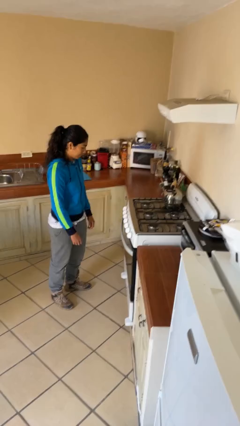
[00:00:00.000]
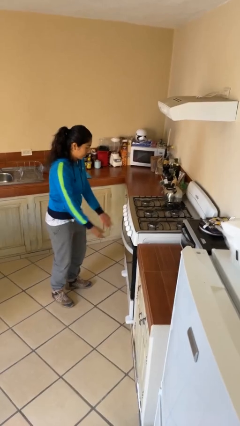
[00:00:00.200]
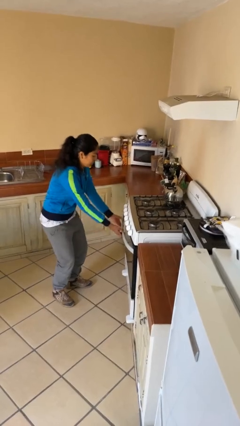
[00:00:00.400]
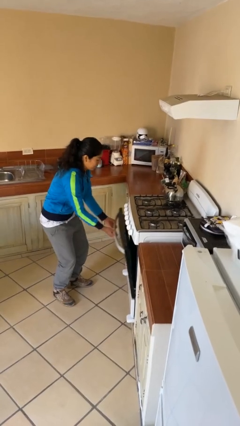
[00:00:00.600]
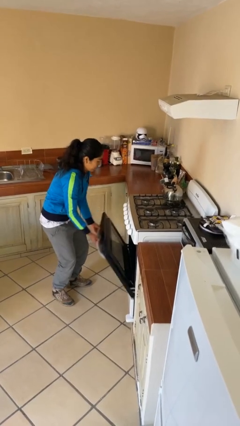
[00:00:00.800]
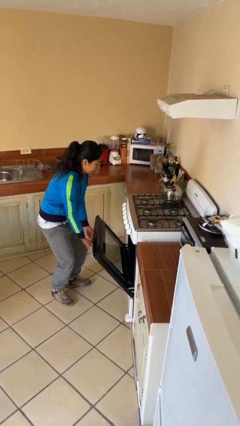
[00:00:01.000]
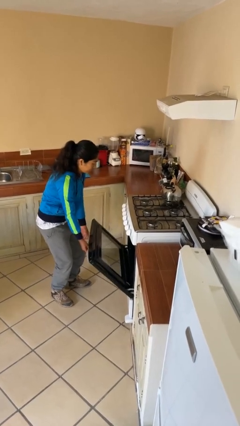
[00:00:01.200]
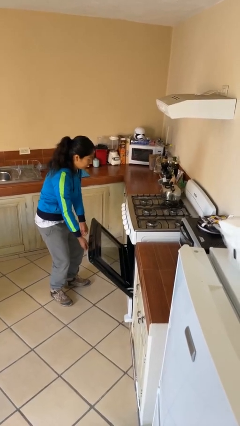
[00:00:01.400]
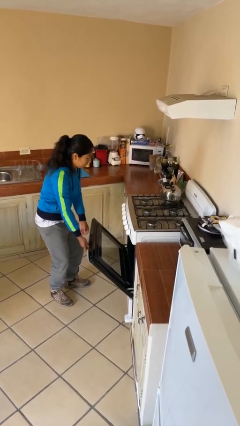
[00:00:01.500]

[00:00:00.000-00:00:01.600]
person opens oven door

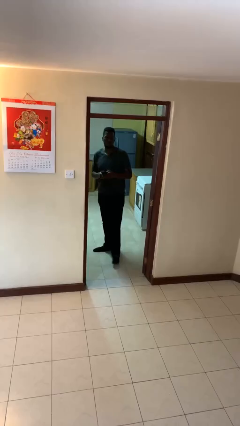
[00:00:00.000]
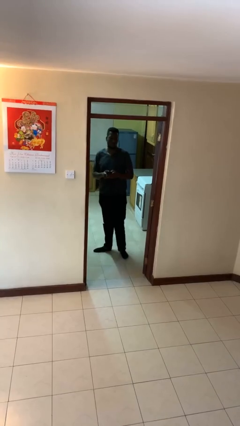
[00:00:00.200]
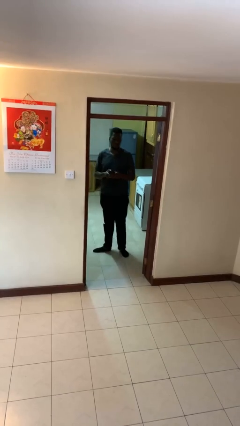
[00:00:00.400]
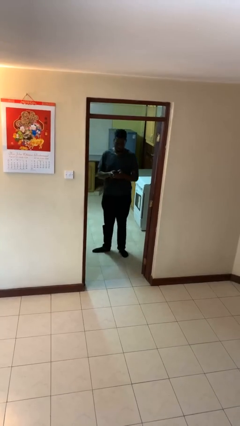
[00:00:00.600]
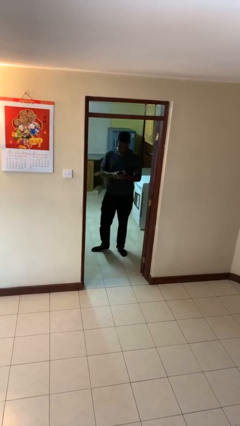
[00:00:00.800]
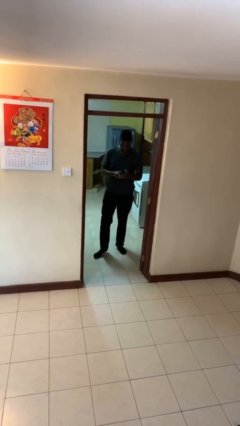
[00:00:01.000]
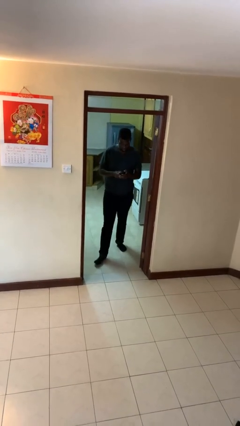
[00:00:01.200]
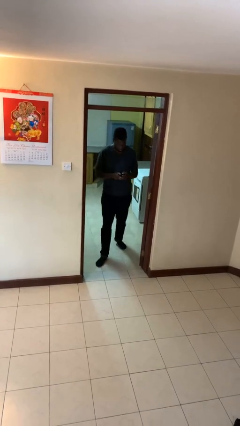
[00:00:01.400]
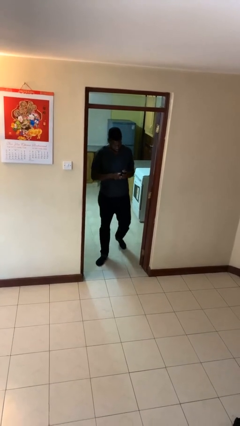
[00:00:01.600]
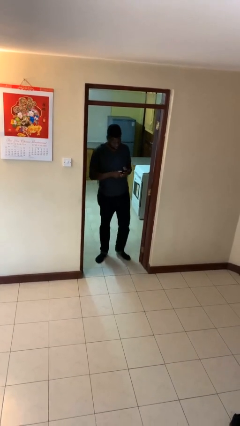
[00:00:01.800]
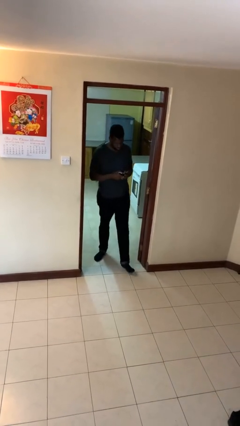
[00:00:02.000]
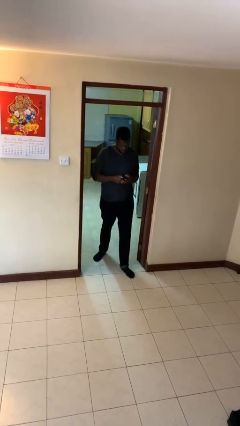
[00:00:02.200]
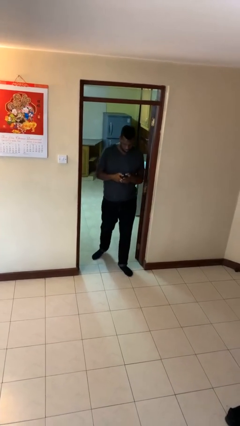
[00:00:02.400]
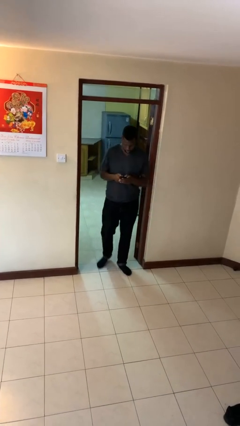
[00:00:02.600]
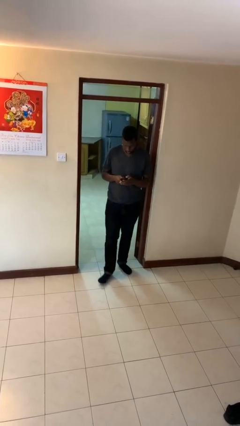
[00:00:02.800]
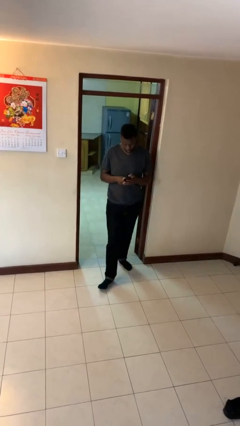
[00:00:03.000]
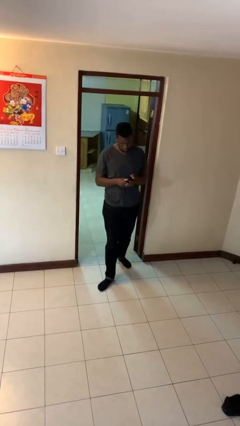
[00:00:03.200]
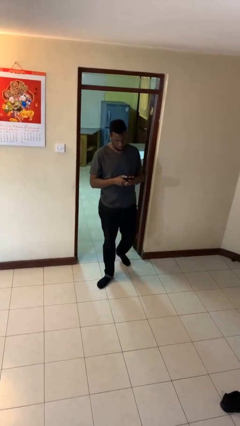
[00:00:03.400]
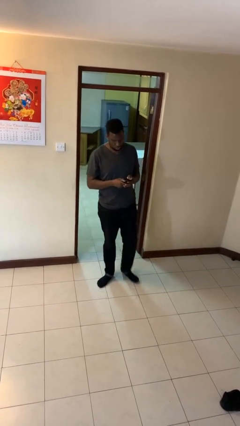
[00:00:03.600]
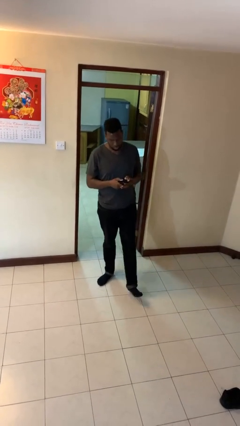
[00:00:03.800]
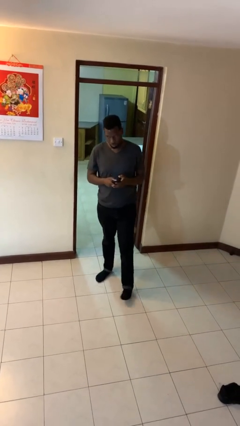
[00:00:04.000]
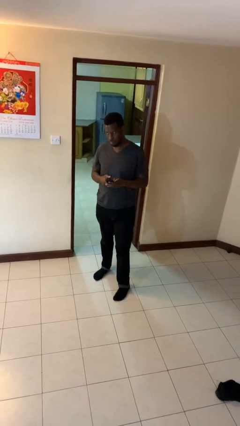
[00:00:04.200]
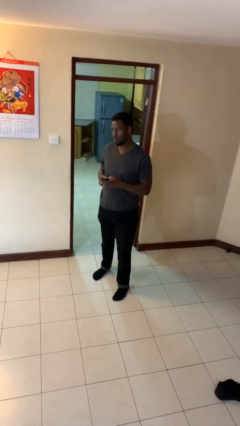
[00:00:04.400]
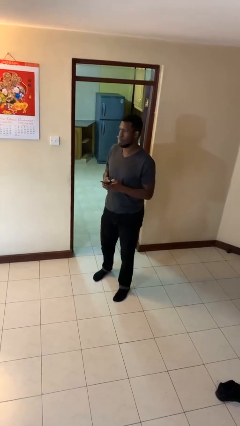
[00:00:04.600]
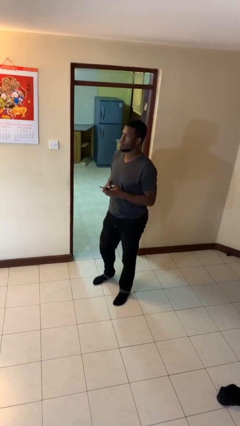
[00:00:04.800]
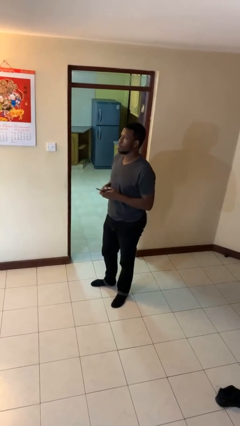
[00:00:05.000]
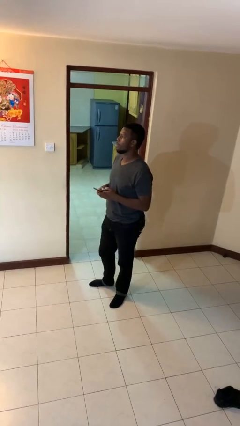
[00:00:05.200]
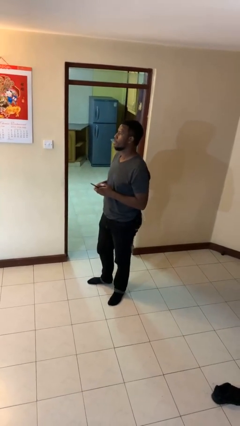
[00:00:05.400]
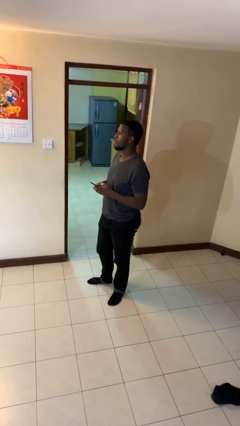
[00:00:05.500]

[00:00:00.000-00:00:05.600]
person enters scene through structure

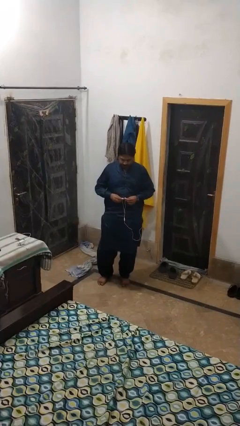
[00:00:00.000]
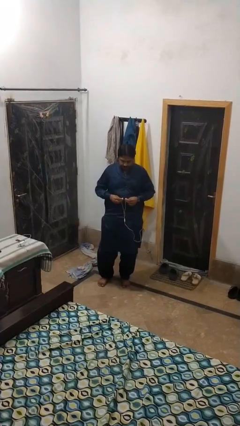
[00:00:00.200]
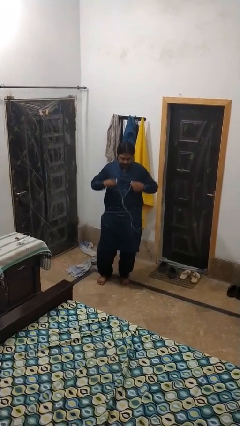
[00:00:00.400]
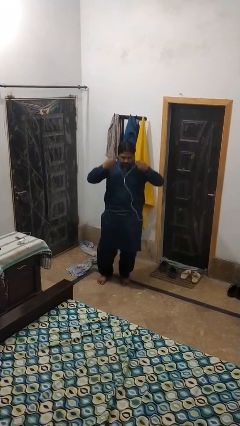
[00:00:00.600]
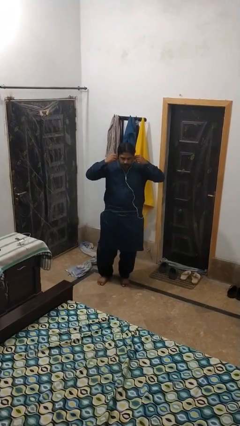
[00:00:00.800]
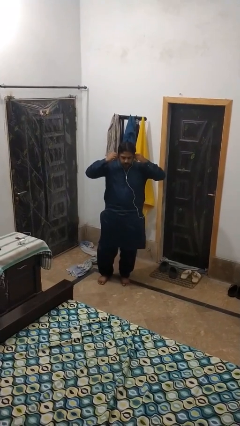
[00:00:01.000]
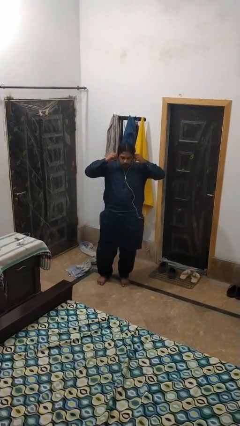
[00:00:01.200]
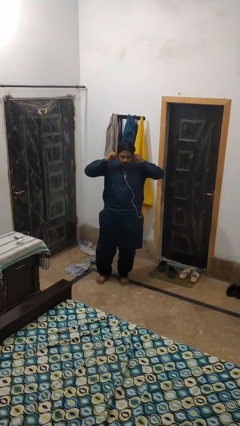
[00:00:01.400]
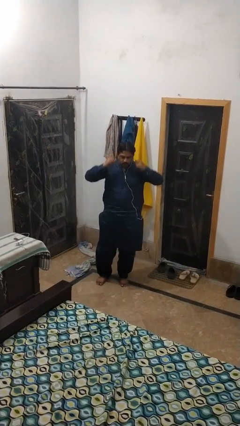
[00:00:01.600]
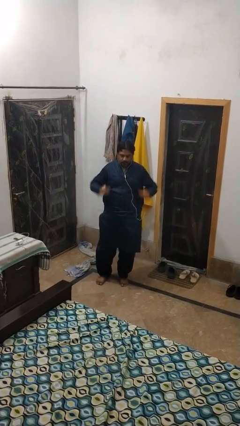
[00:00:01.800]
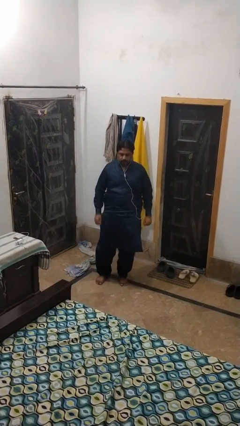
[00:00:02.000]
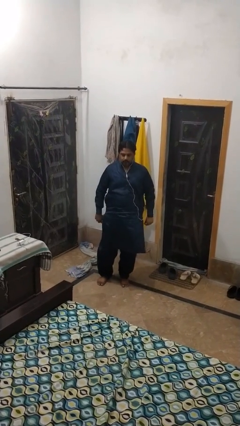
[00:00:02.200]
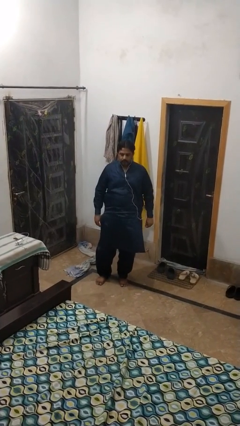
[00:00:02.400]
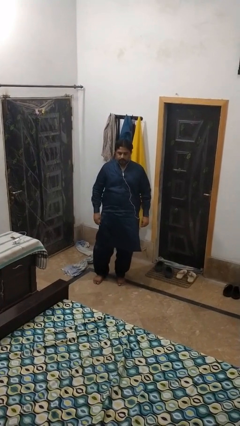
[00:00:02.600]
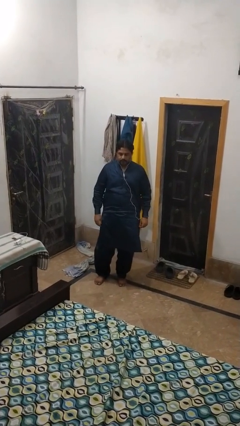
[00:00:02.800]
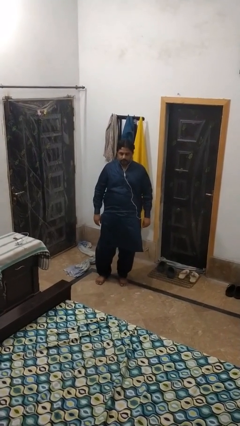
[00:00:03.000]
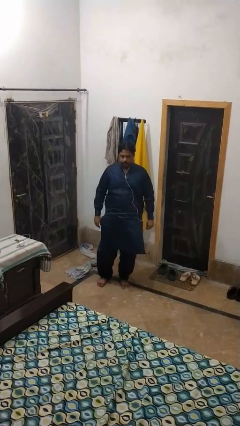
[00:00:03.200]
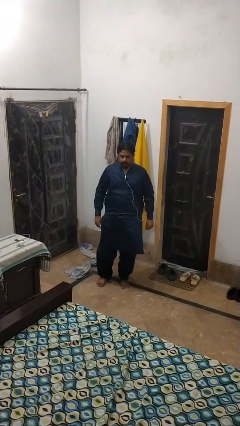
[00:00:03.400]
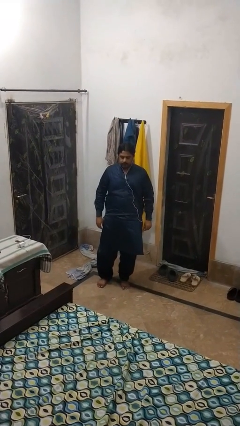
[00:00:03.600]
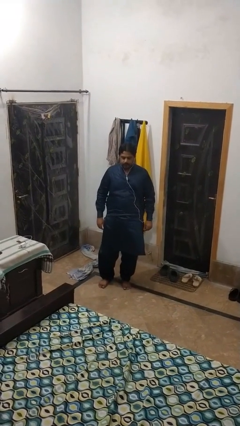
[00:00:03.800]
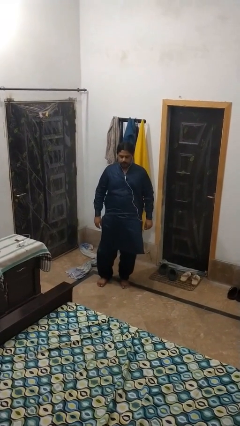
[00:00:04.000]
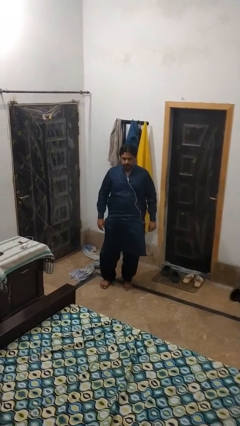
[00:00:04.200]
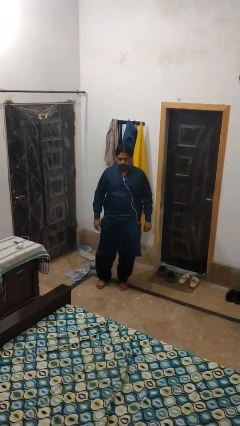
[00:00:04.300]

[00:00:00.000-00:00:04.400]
person puts on headphones

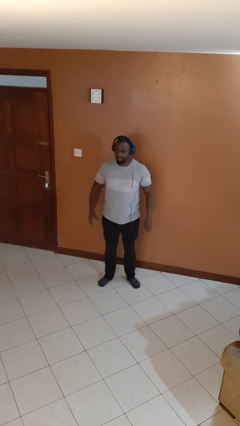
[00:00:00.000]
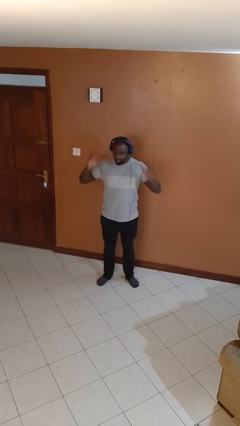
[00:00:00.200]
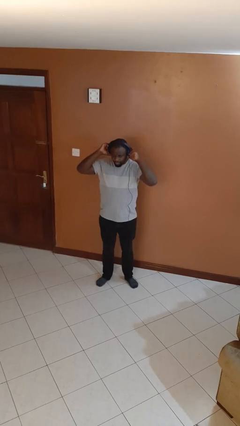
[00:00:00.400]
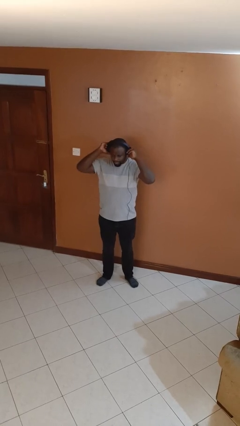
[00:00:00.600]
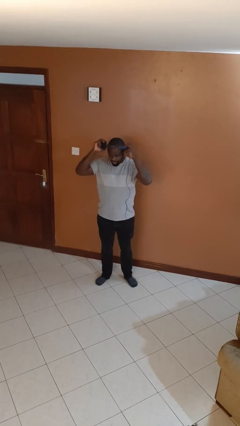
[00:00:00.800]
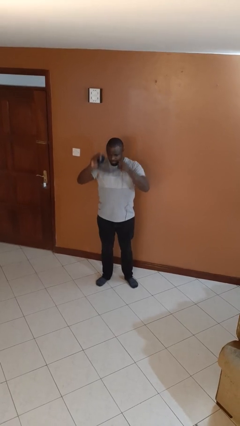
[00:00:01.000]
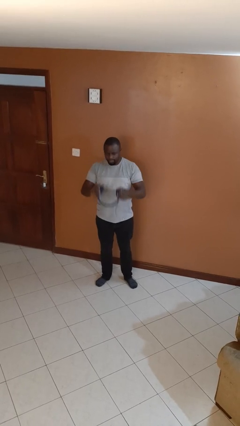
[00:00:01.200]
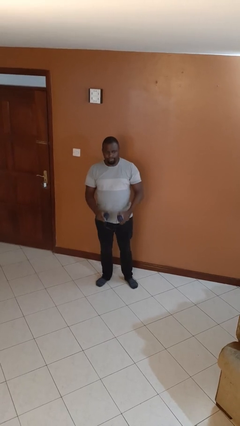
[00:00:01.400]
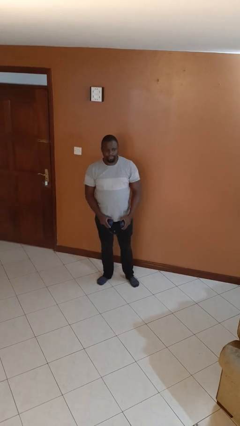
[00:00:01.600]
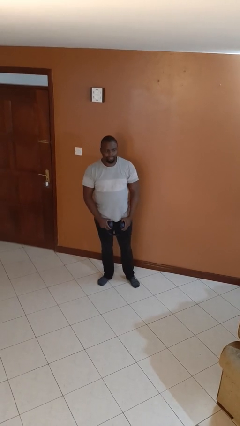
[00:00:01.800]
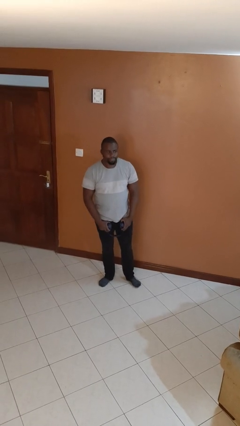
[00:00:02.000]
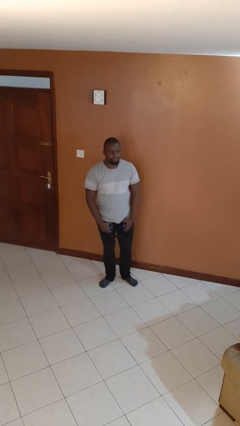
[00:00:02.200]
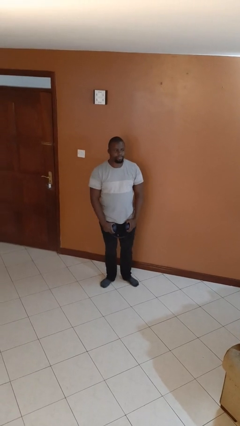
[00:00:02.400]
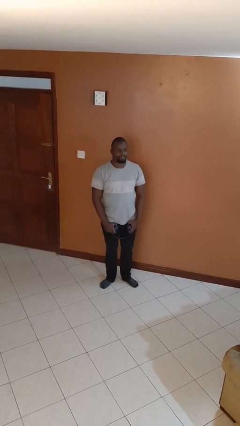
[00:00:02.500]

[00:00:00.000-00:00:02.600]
person takes off headphones

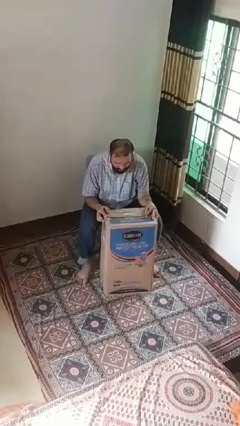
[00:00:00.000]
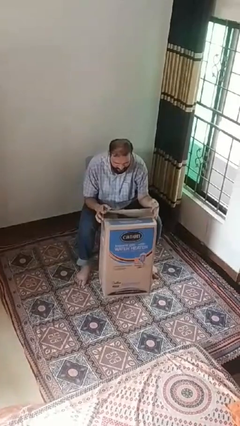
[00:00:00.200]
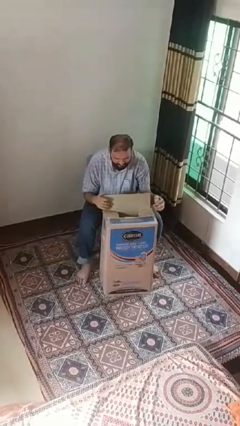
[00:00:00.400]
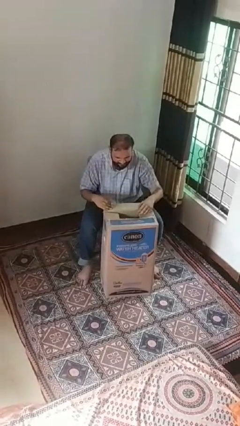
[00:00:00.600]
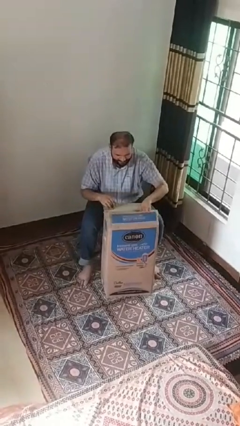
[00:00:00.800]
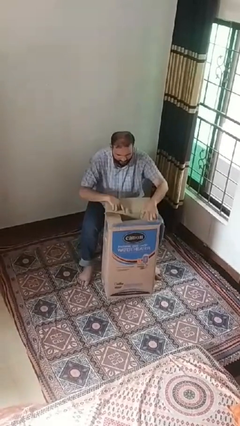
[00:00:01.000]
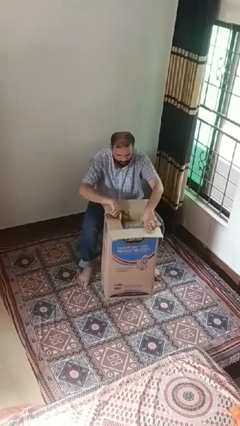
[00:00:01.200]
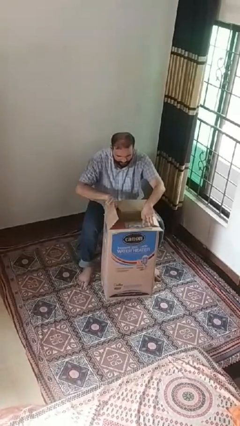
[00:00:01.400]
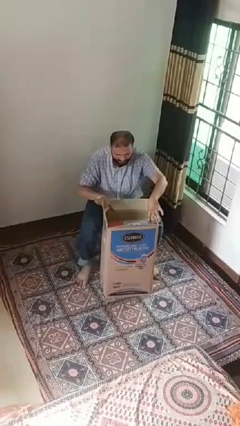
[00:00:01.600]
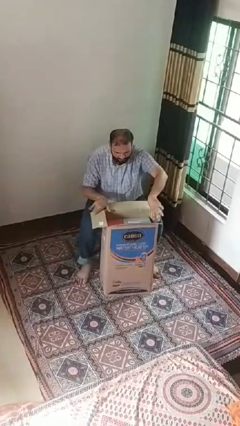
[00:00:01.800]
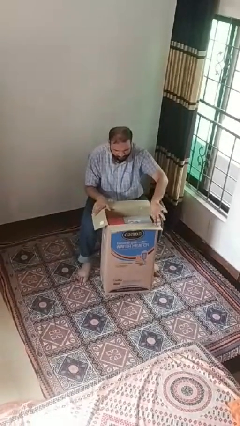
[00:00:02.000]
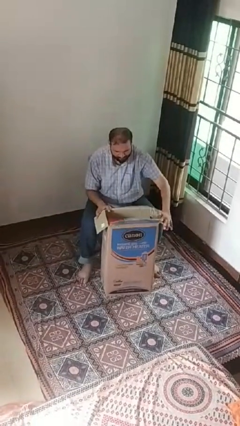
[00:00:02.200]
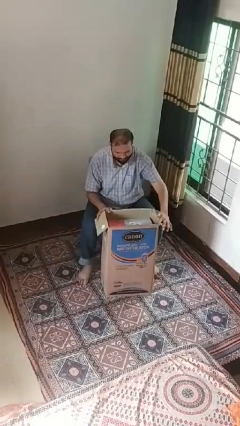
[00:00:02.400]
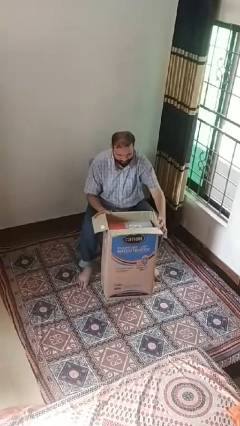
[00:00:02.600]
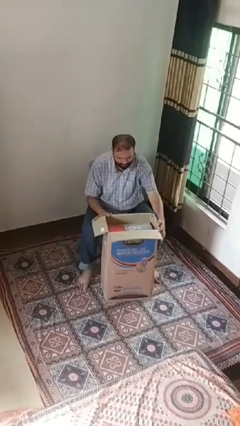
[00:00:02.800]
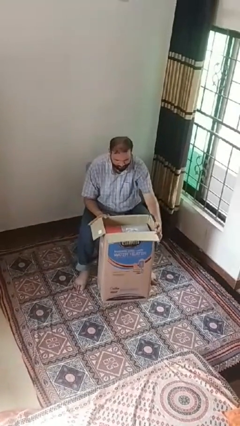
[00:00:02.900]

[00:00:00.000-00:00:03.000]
person opens box

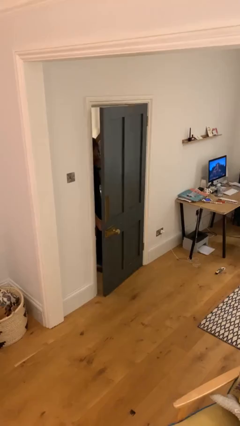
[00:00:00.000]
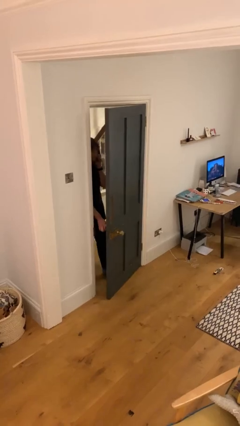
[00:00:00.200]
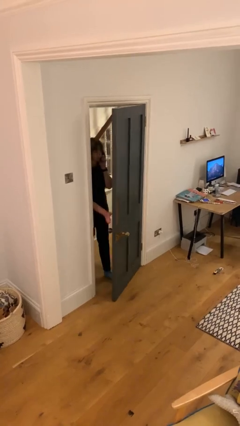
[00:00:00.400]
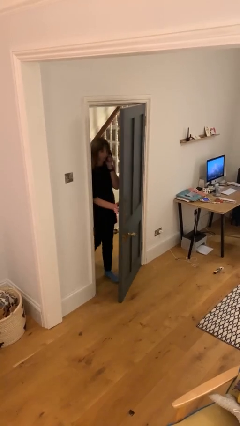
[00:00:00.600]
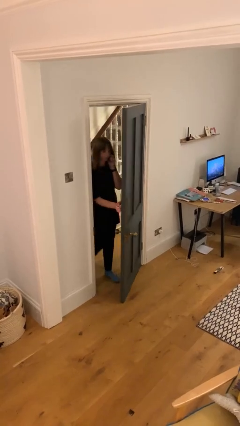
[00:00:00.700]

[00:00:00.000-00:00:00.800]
person opens facility door
